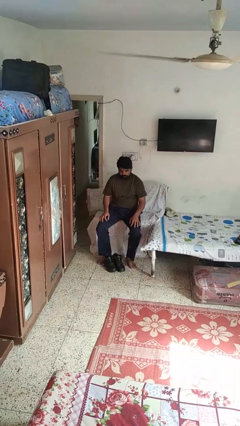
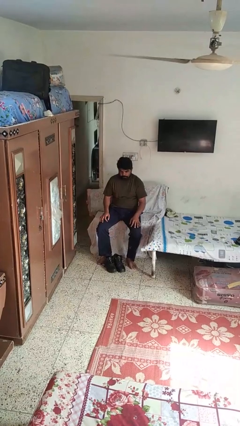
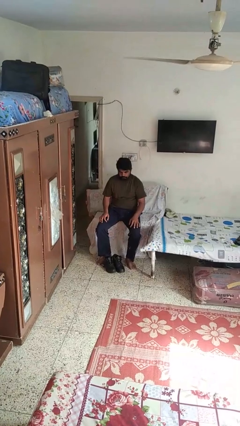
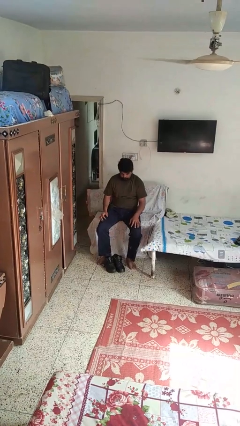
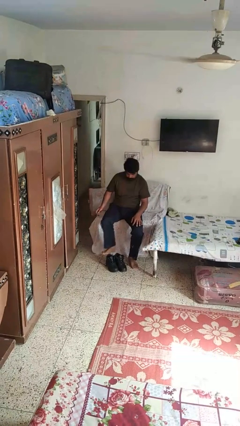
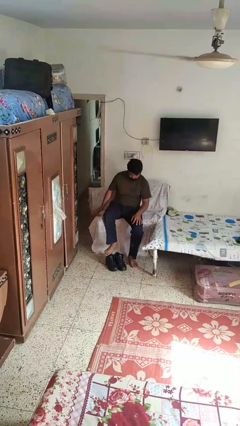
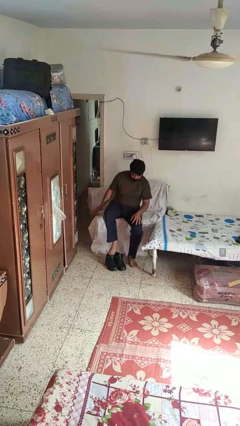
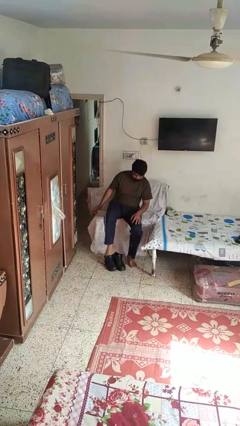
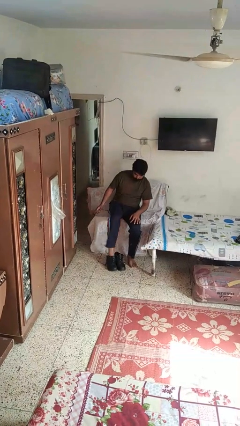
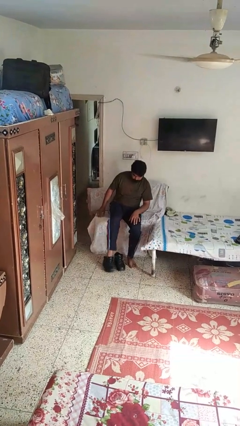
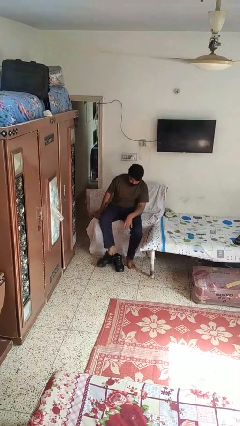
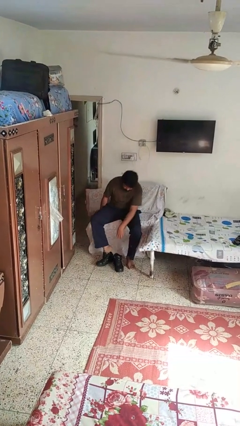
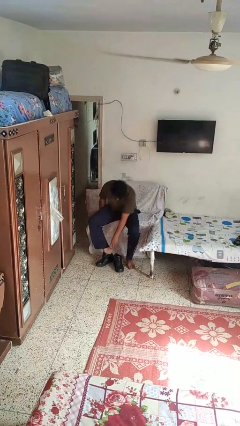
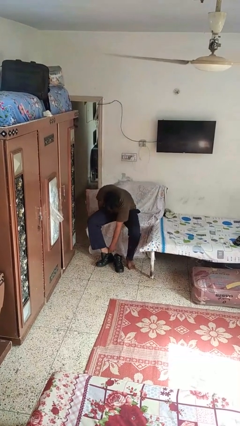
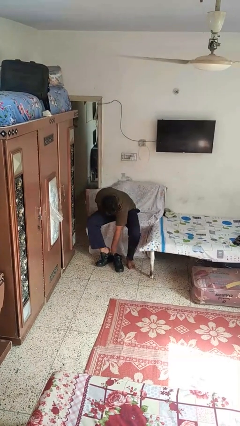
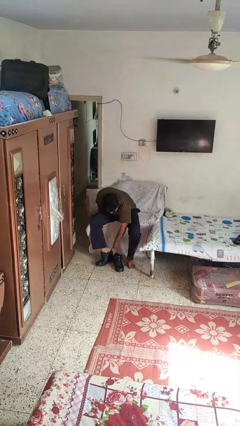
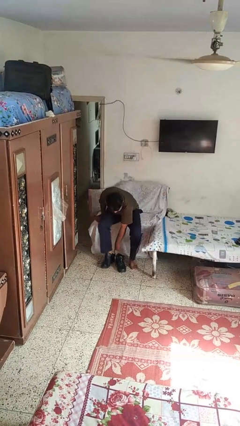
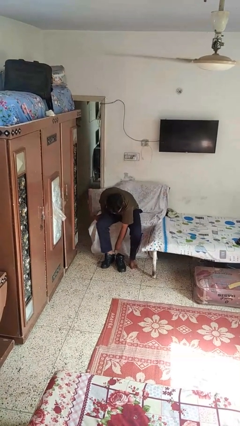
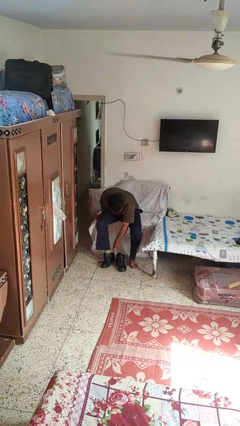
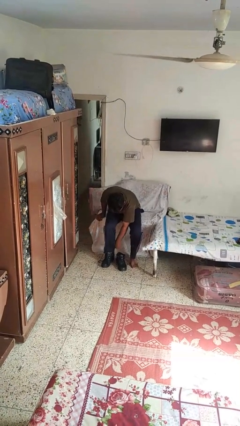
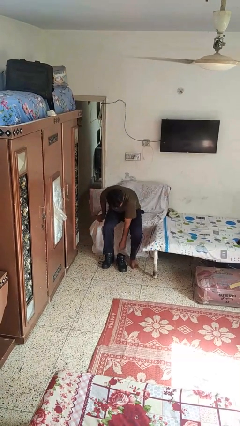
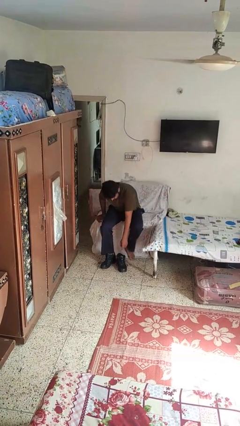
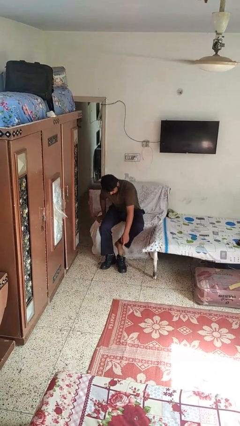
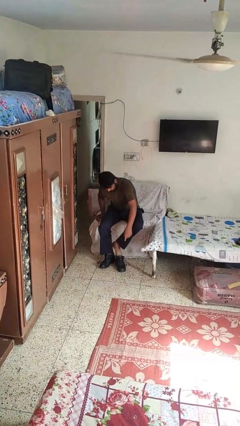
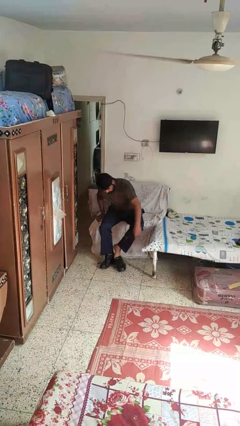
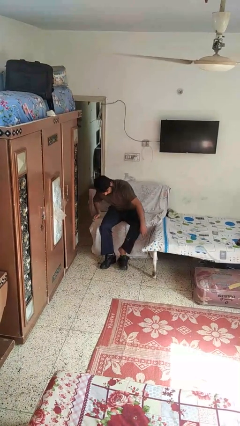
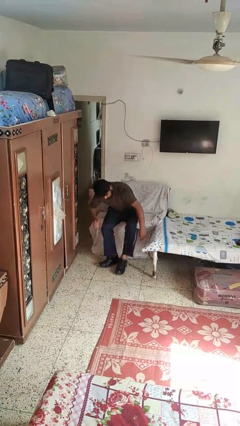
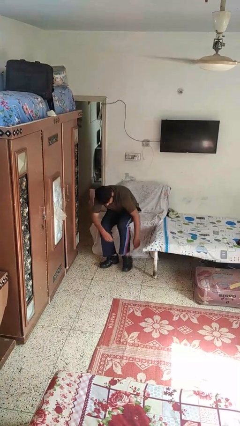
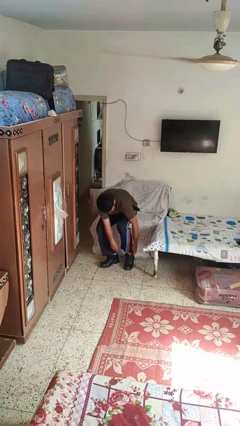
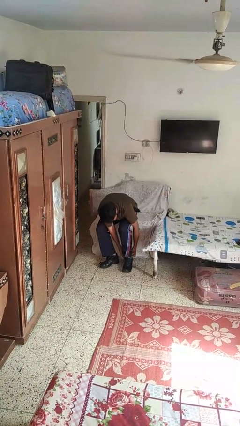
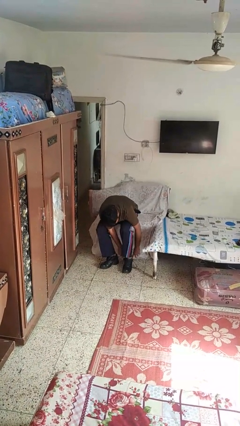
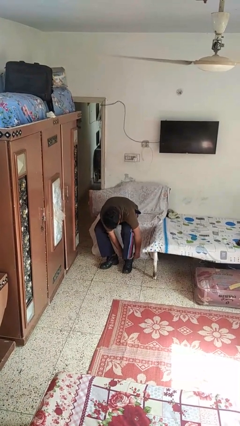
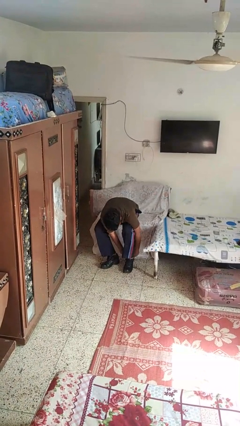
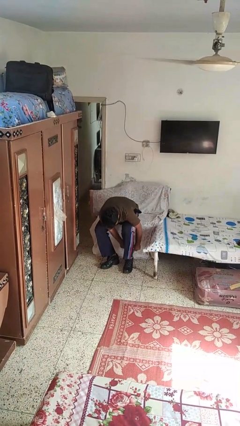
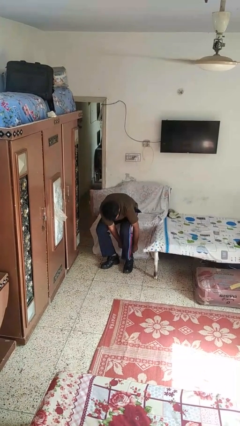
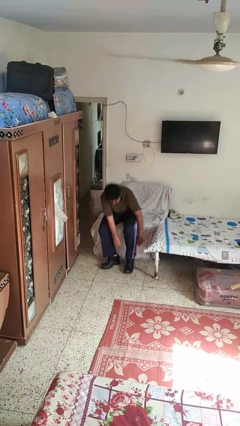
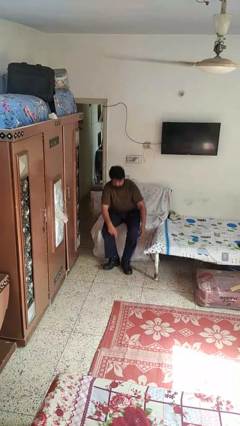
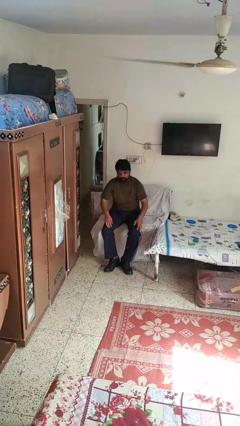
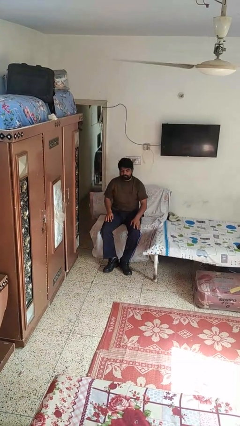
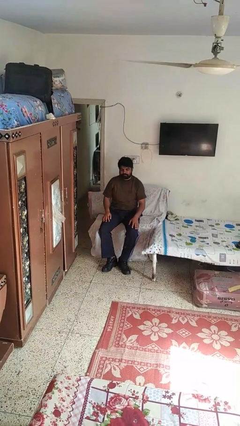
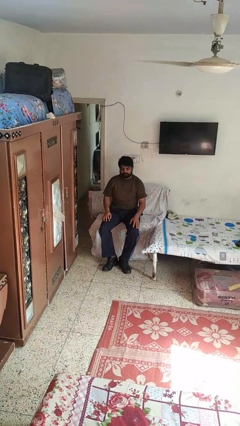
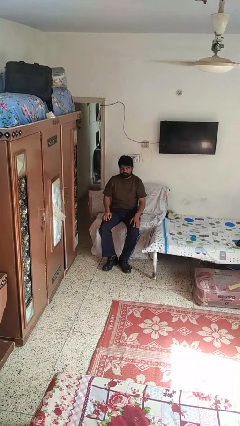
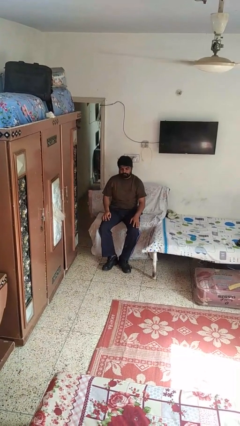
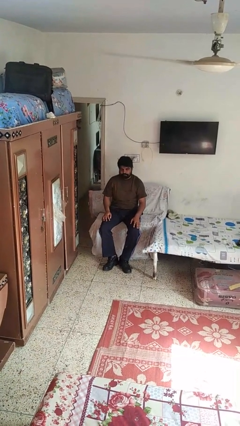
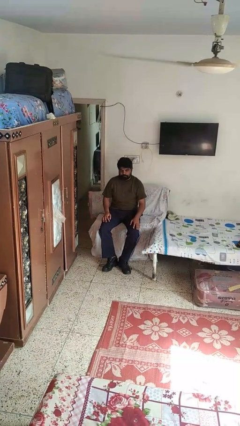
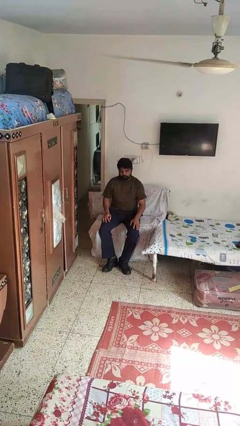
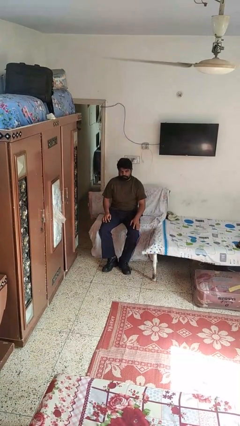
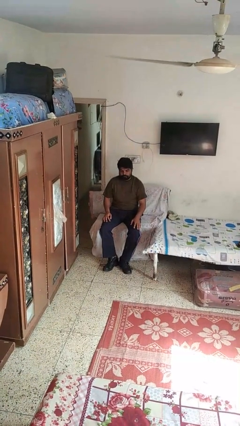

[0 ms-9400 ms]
person puts on boots

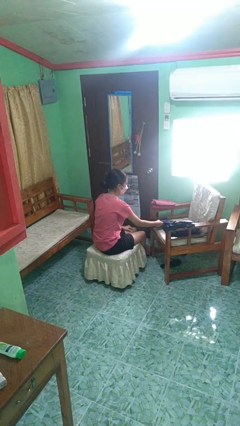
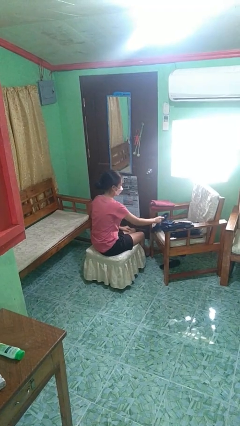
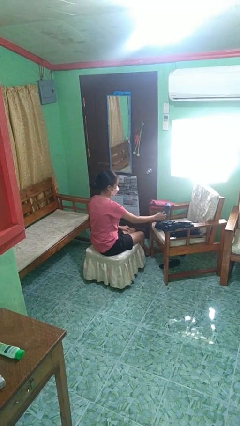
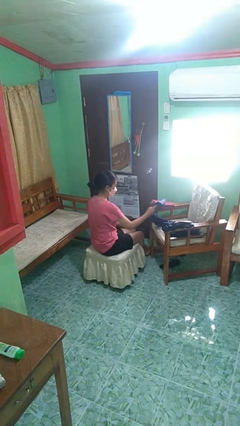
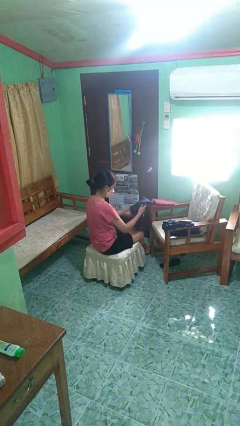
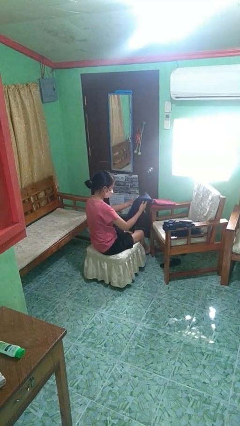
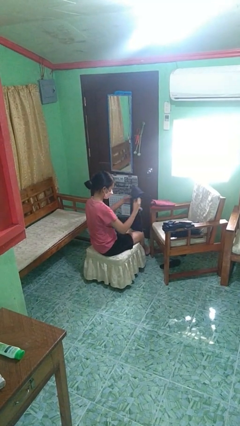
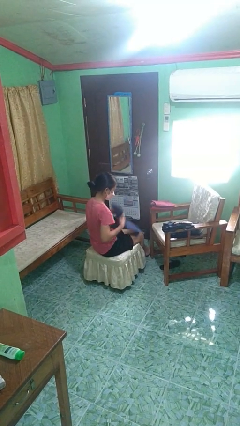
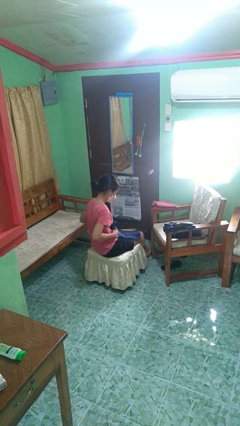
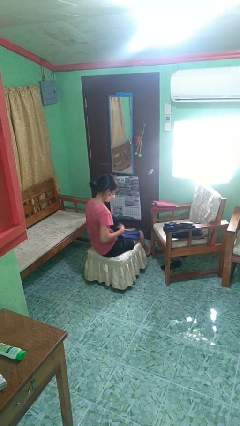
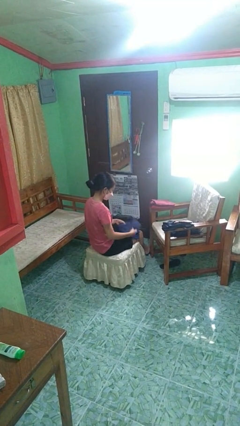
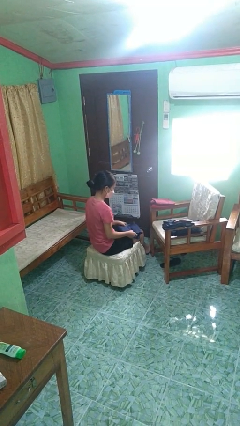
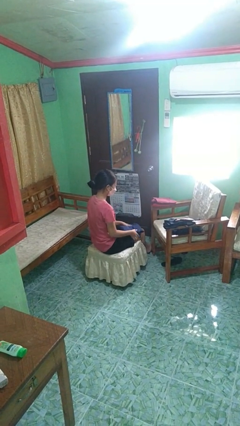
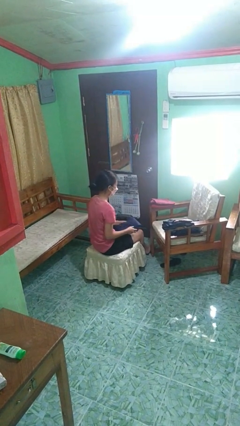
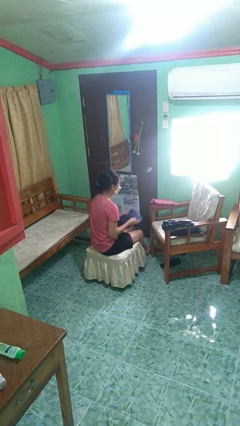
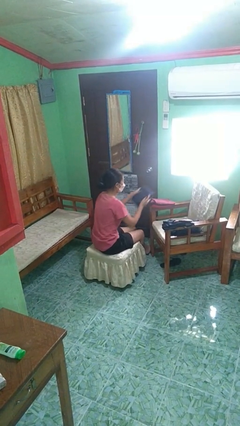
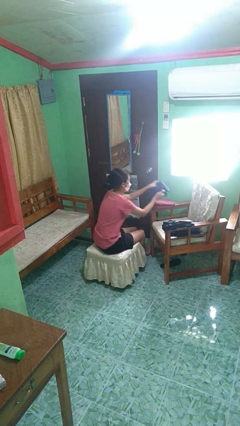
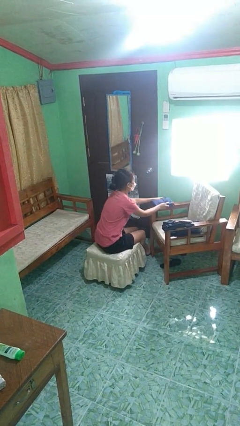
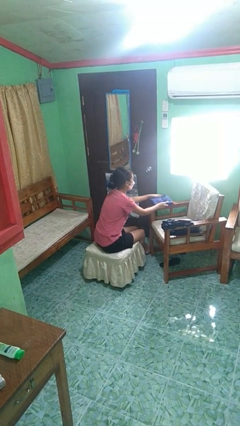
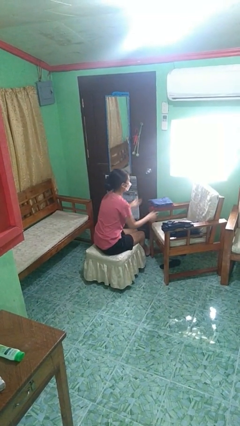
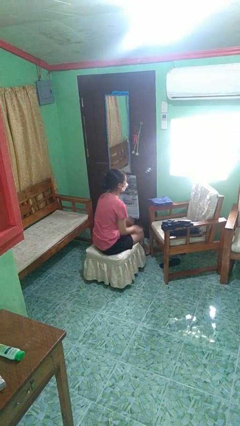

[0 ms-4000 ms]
person folds shirt

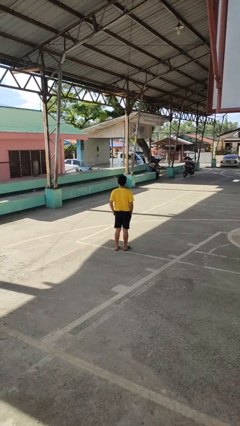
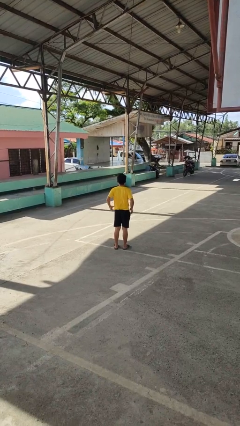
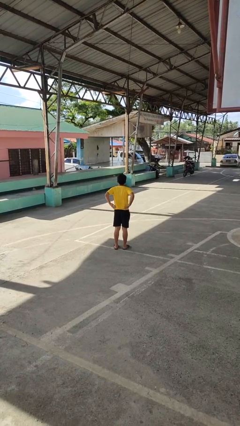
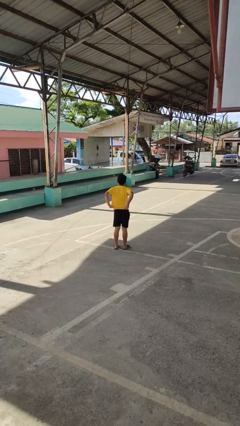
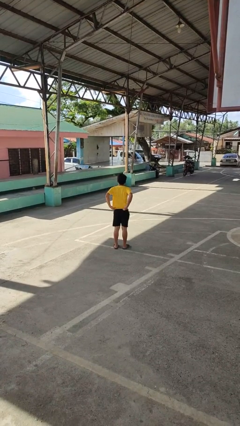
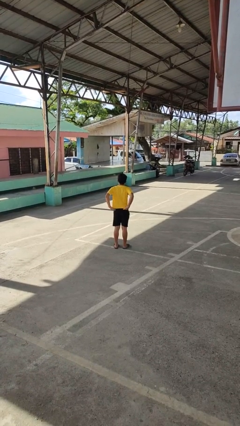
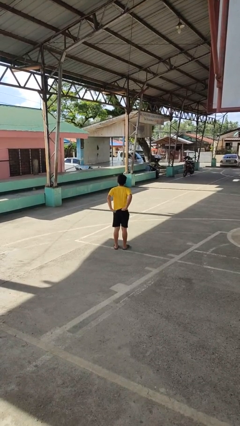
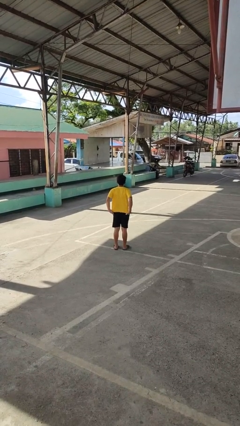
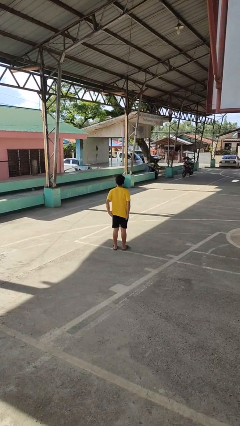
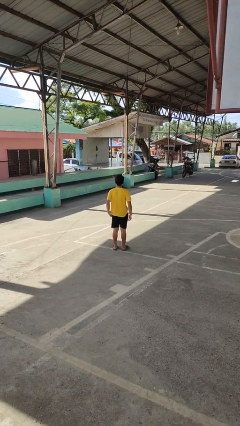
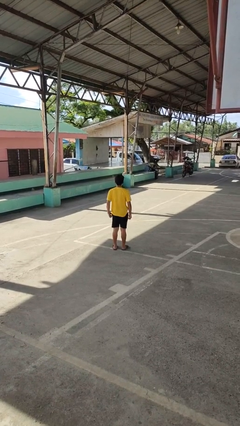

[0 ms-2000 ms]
person untucks shirt

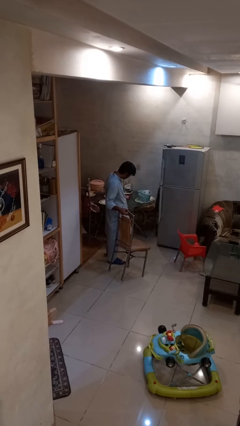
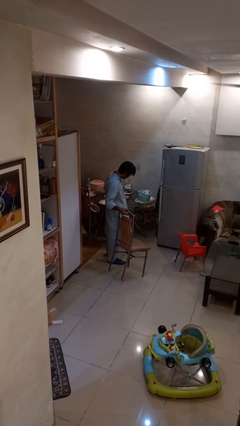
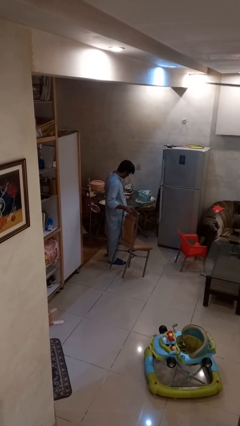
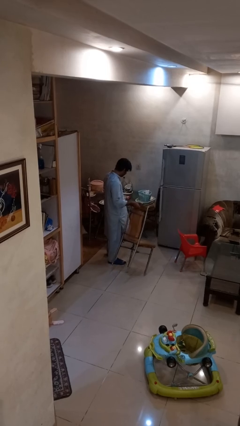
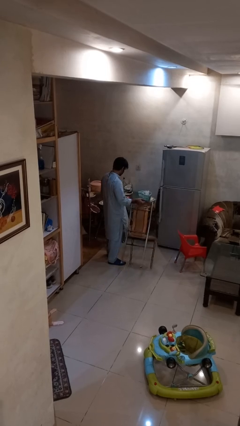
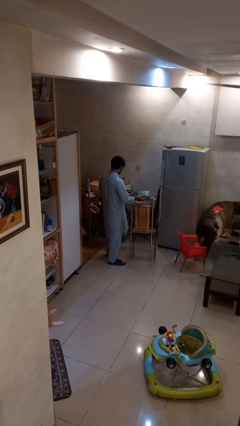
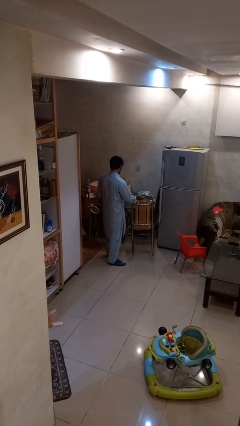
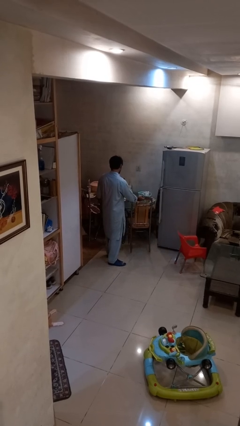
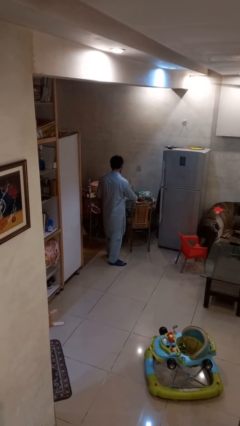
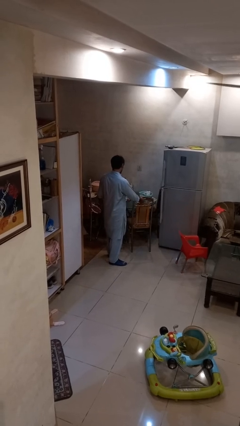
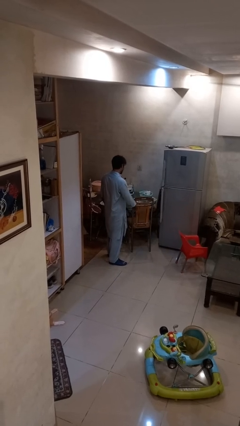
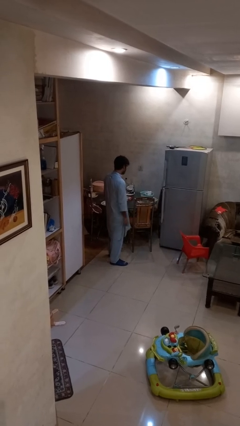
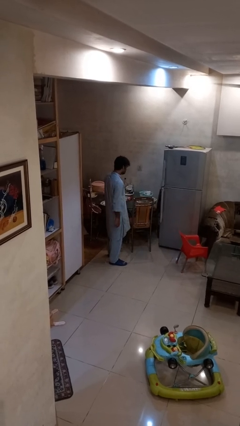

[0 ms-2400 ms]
person pushes in chair
